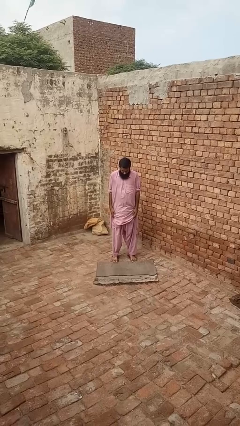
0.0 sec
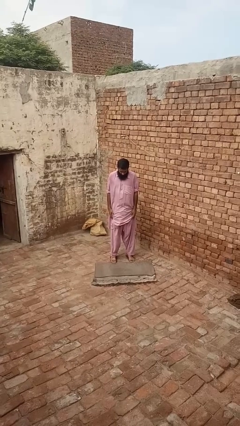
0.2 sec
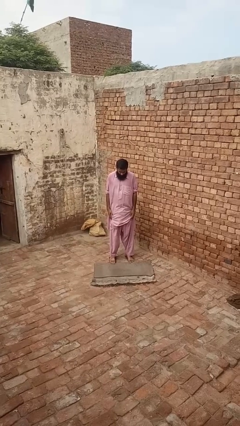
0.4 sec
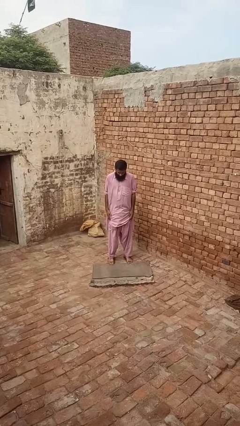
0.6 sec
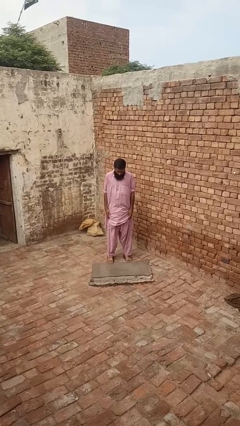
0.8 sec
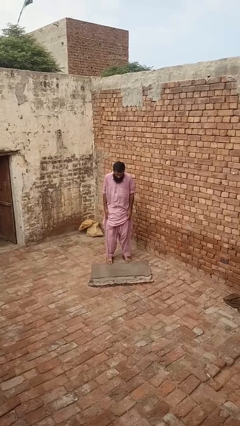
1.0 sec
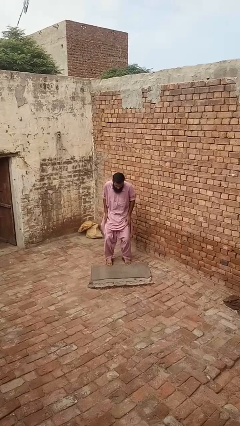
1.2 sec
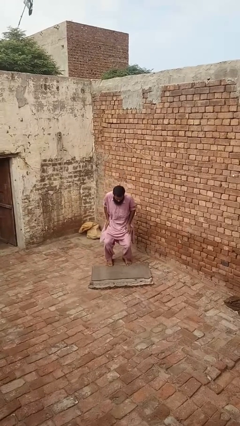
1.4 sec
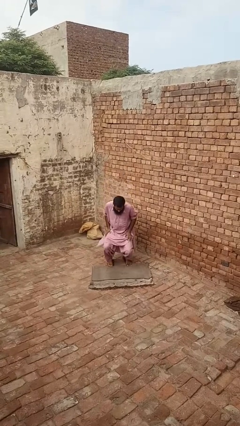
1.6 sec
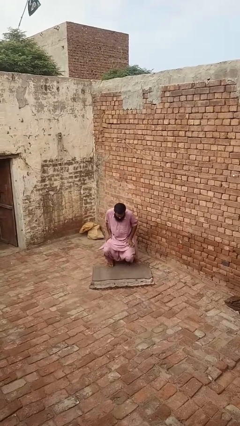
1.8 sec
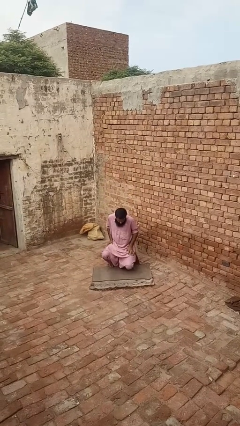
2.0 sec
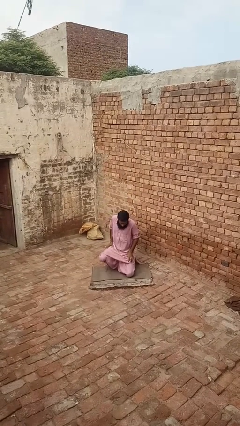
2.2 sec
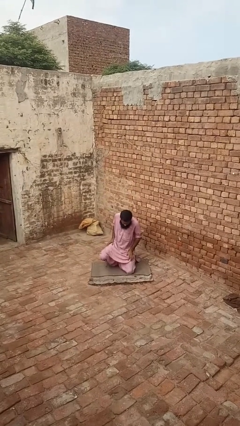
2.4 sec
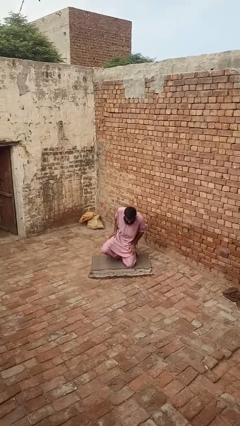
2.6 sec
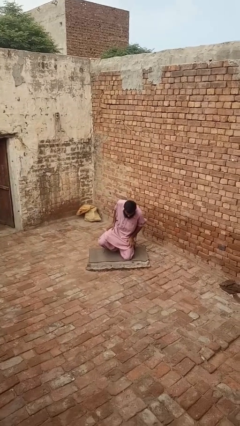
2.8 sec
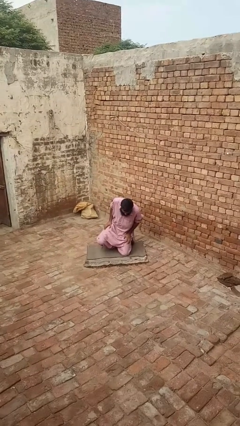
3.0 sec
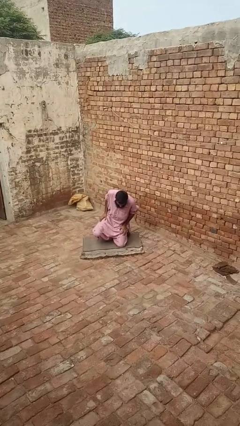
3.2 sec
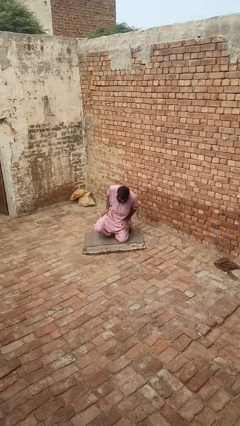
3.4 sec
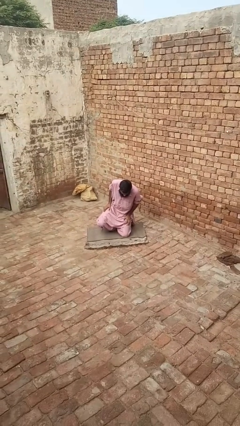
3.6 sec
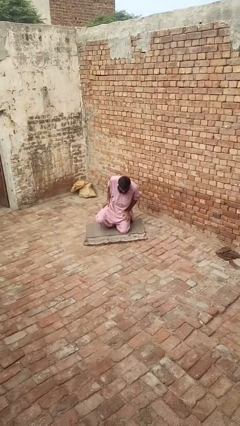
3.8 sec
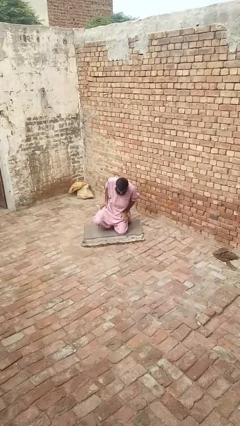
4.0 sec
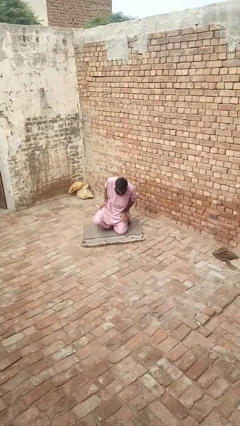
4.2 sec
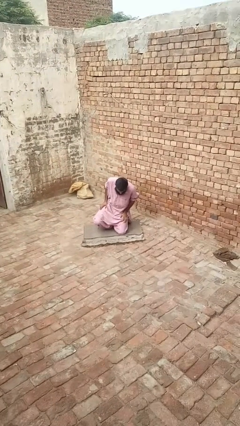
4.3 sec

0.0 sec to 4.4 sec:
person kneels

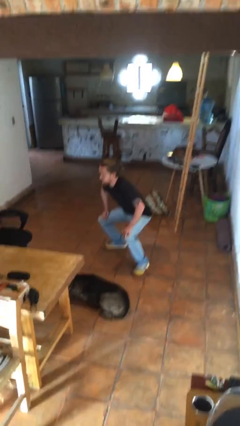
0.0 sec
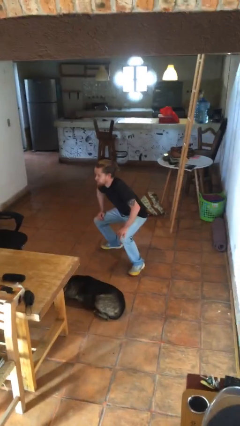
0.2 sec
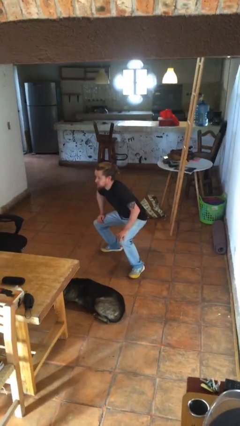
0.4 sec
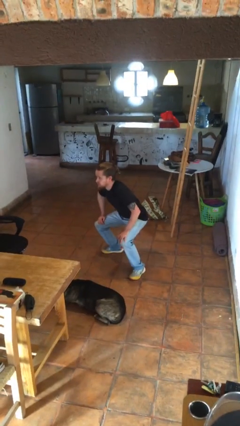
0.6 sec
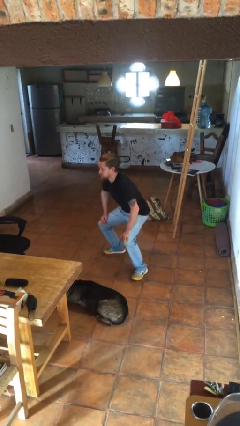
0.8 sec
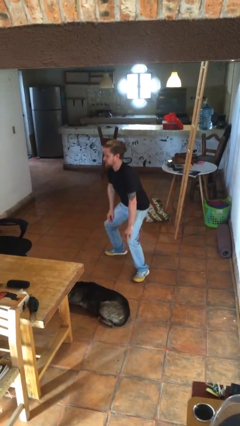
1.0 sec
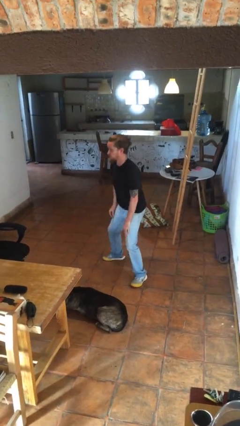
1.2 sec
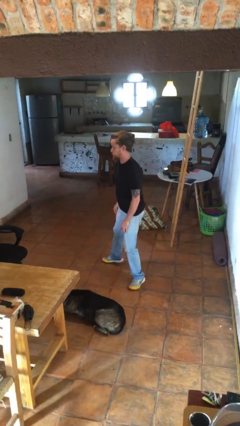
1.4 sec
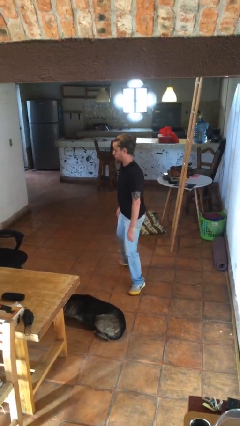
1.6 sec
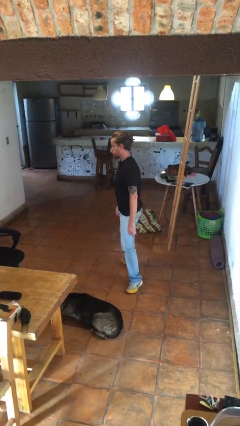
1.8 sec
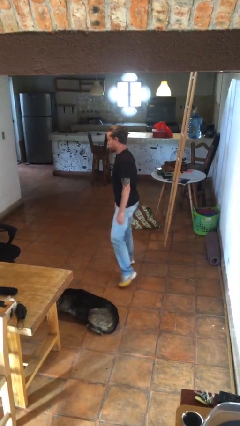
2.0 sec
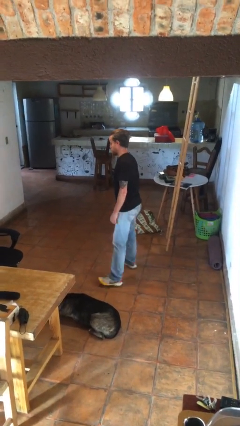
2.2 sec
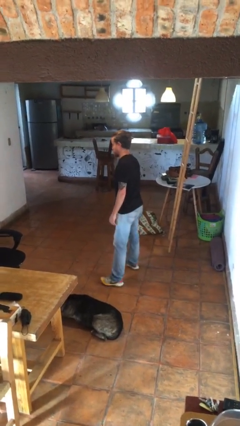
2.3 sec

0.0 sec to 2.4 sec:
person stands up

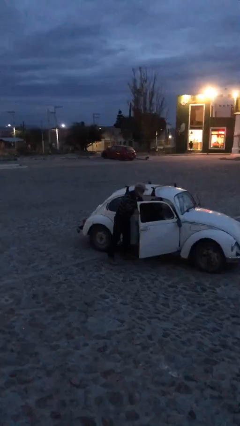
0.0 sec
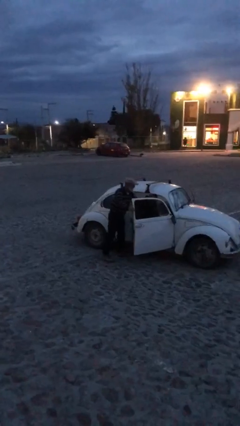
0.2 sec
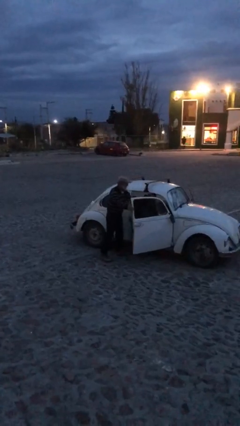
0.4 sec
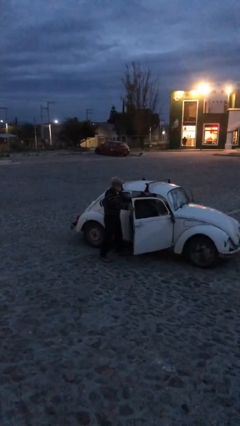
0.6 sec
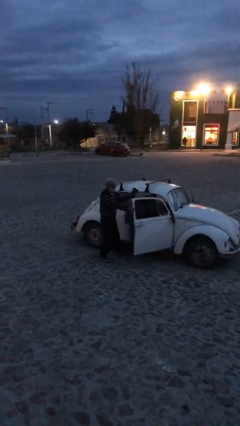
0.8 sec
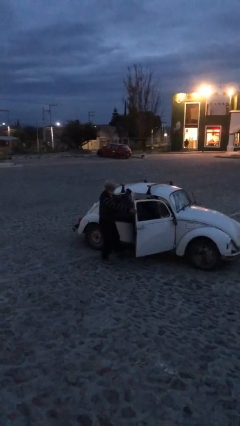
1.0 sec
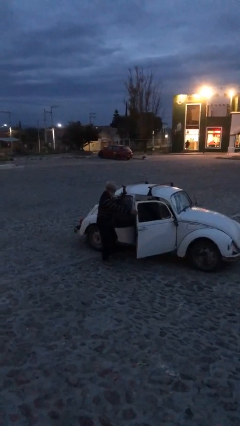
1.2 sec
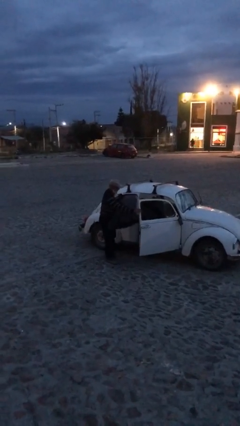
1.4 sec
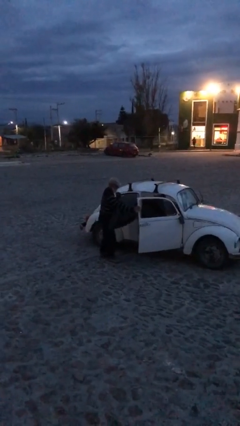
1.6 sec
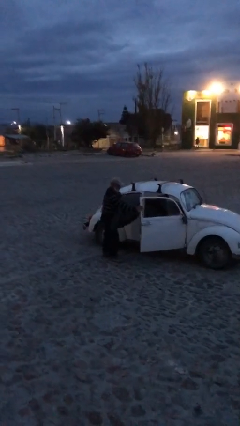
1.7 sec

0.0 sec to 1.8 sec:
person unloads car

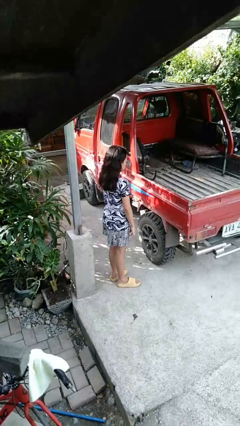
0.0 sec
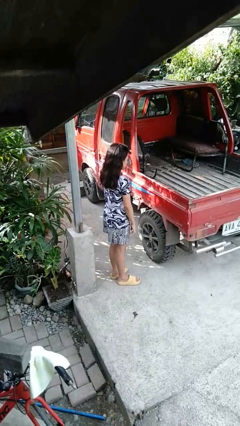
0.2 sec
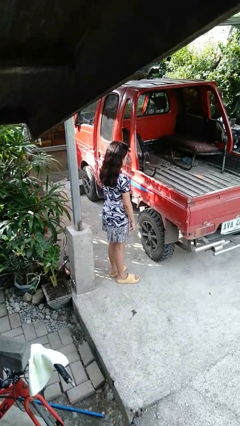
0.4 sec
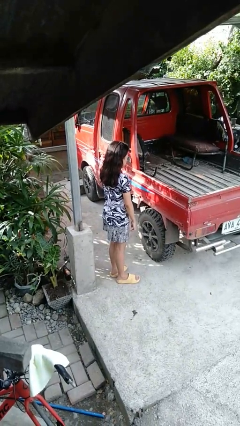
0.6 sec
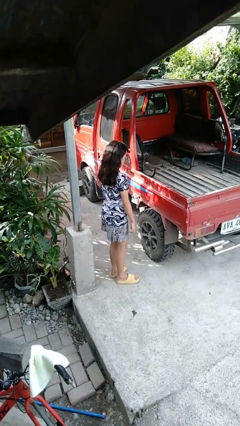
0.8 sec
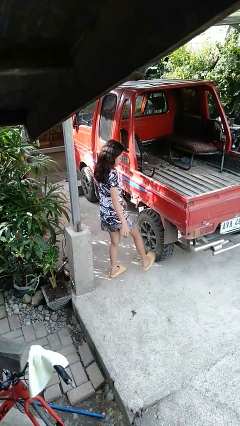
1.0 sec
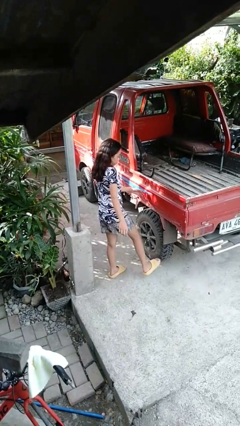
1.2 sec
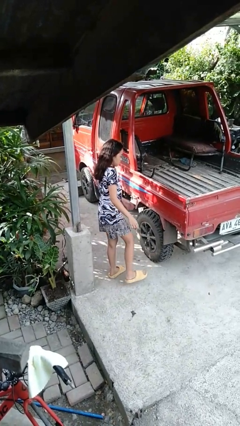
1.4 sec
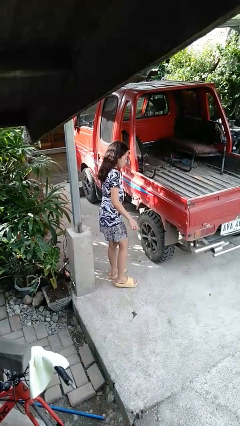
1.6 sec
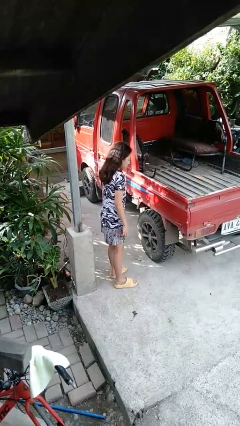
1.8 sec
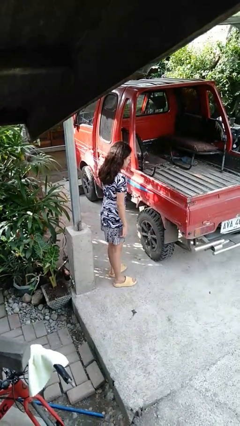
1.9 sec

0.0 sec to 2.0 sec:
person kicks car tires

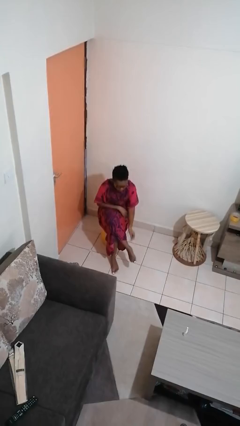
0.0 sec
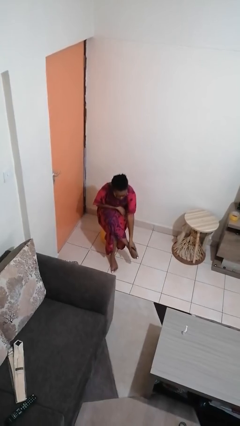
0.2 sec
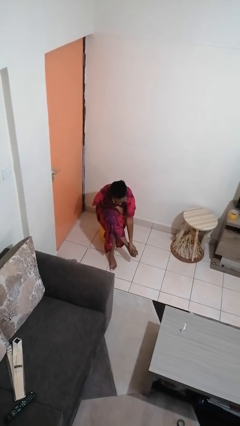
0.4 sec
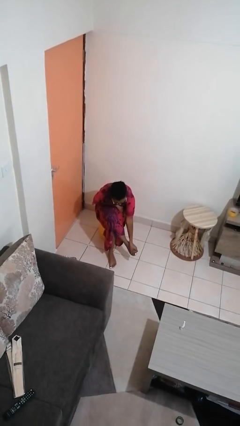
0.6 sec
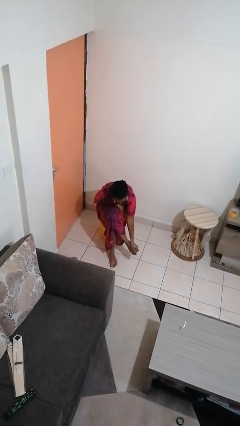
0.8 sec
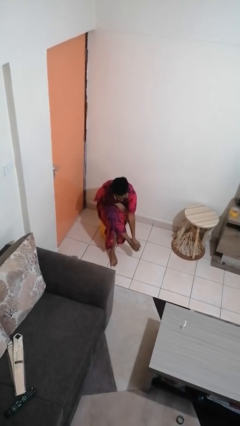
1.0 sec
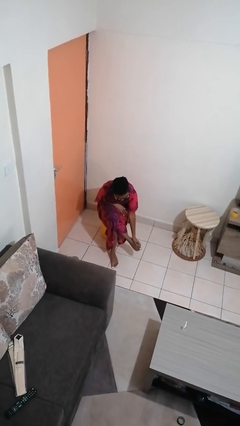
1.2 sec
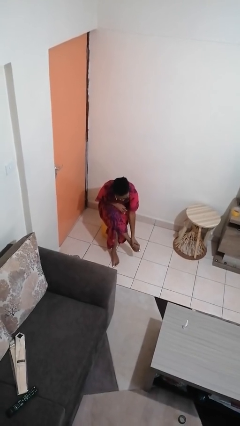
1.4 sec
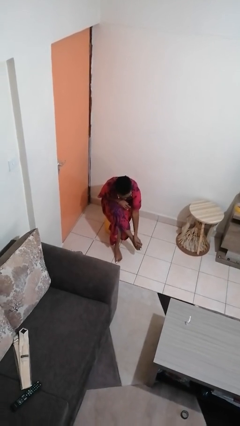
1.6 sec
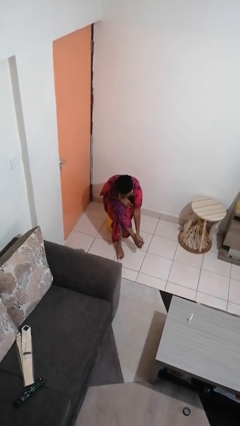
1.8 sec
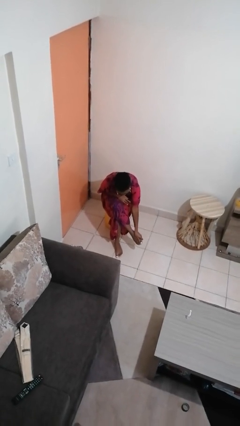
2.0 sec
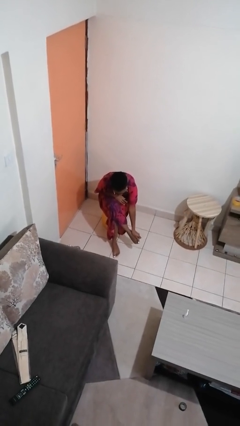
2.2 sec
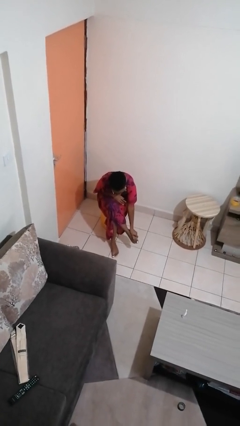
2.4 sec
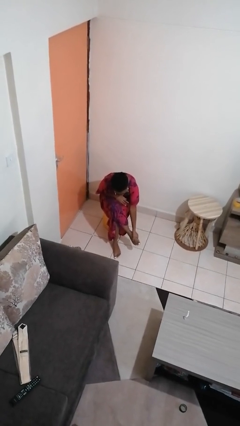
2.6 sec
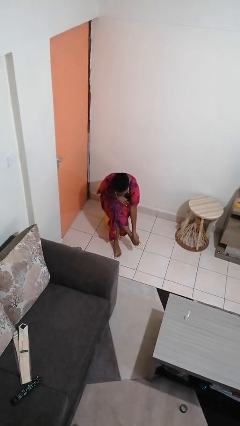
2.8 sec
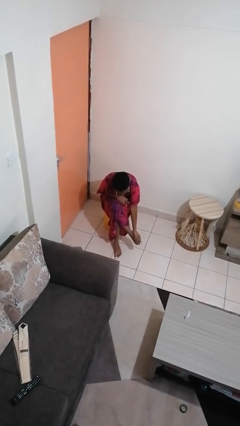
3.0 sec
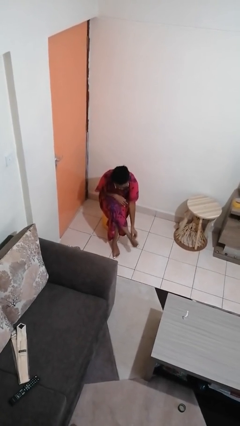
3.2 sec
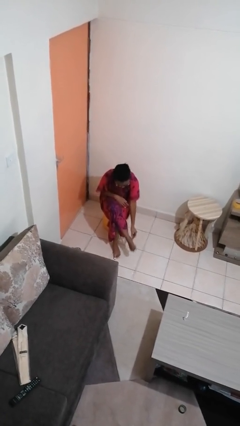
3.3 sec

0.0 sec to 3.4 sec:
person rubs foot

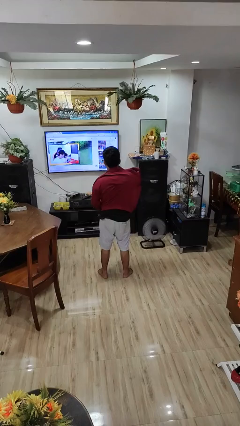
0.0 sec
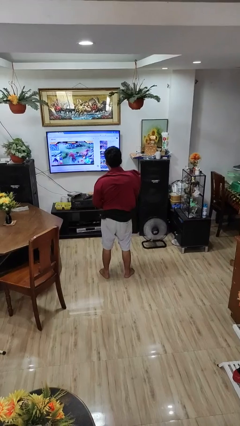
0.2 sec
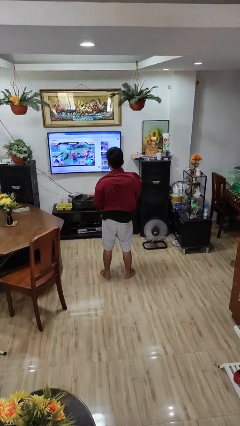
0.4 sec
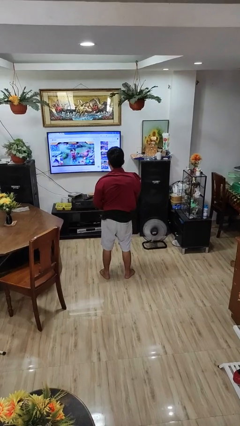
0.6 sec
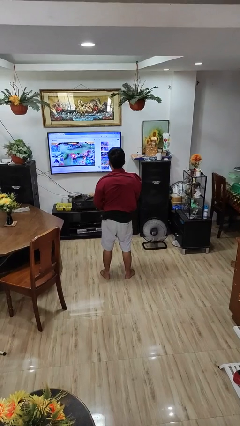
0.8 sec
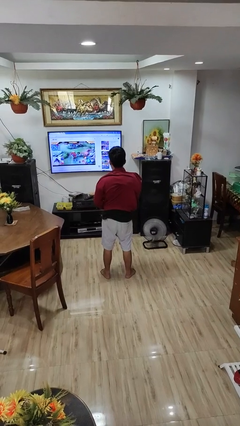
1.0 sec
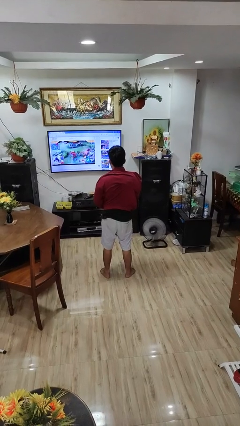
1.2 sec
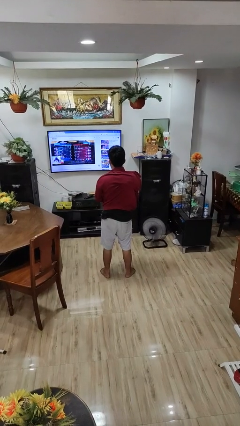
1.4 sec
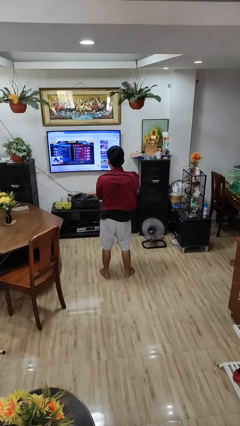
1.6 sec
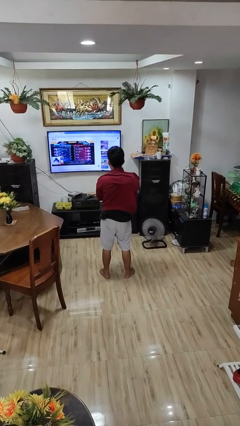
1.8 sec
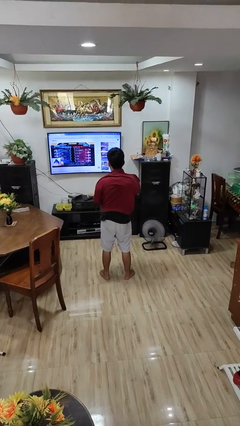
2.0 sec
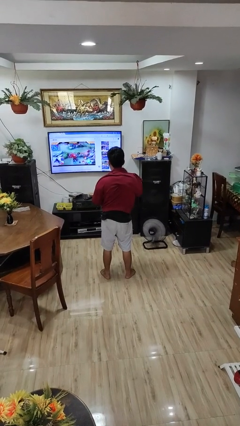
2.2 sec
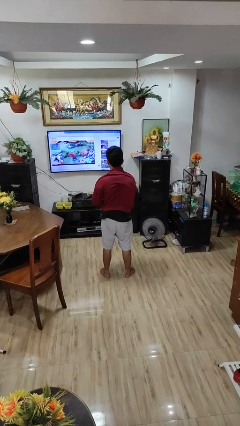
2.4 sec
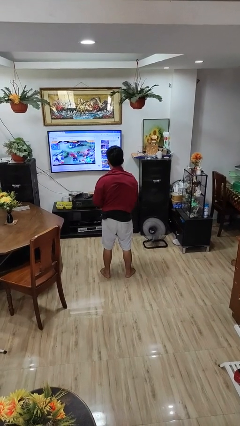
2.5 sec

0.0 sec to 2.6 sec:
person zips up jacket

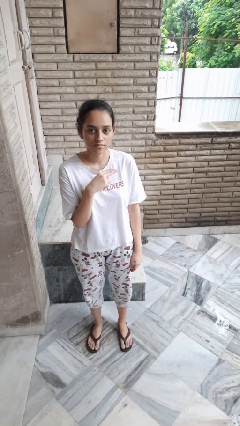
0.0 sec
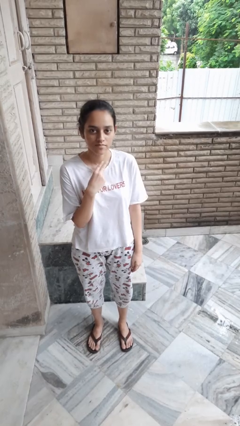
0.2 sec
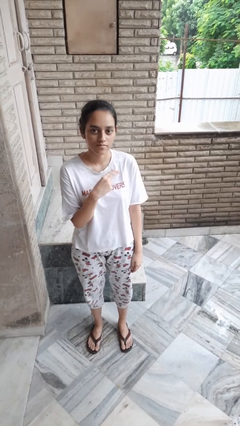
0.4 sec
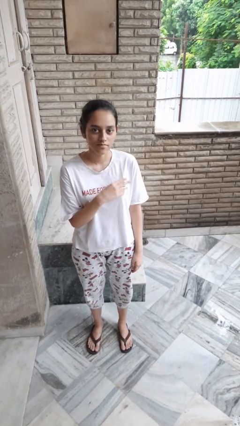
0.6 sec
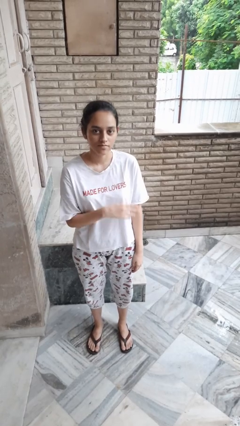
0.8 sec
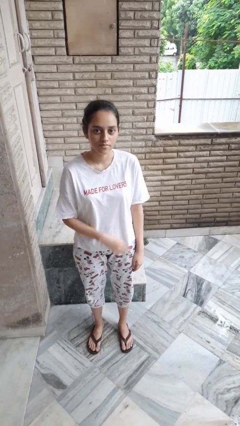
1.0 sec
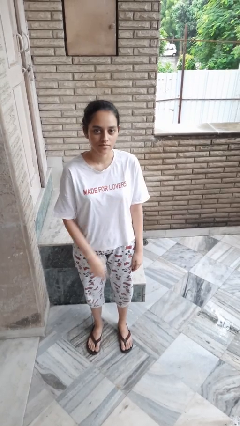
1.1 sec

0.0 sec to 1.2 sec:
person gestures cut
